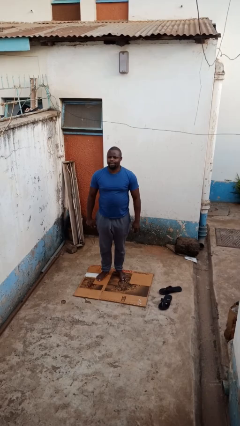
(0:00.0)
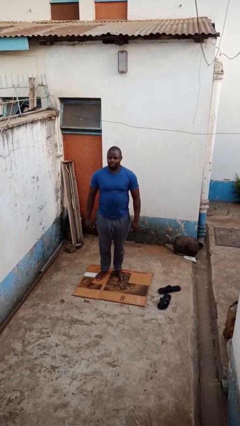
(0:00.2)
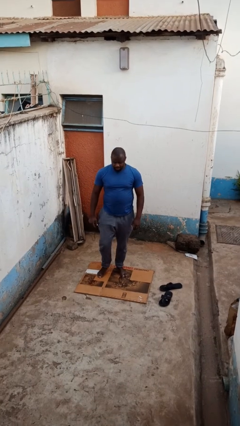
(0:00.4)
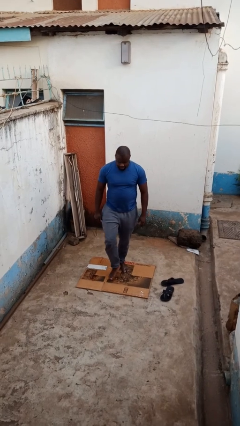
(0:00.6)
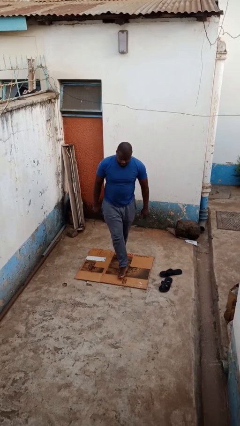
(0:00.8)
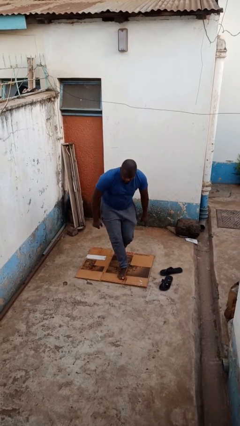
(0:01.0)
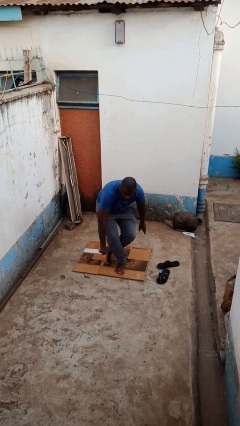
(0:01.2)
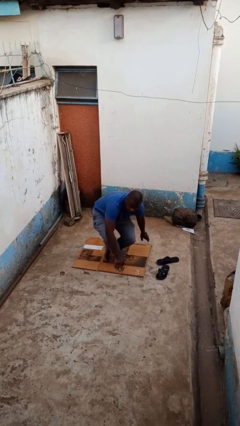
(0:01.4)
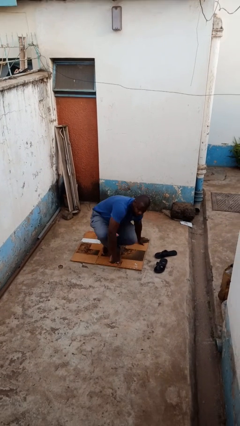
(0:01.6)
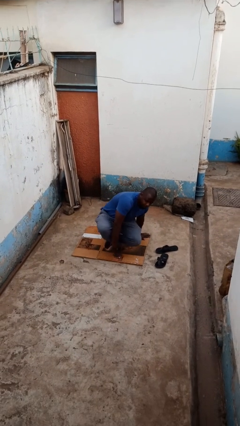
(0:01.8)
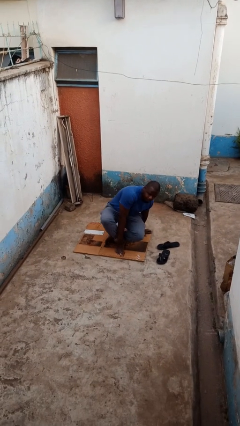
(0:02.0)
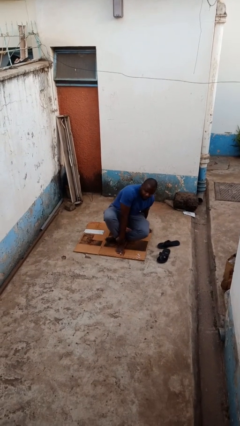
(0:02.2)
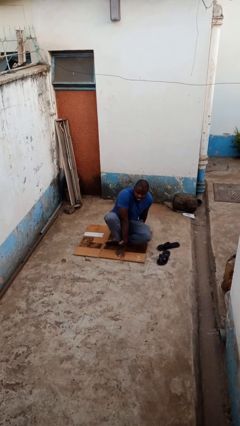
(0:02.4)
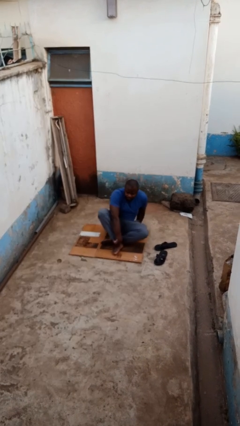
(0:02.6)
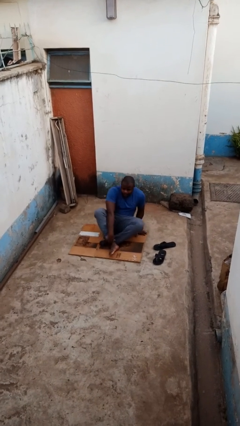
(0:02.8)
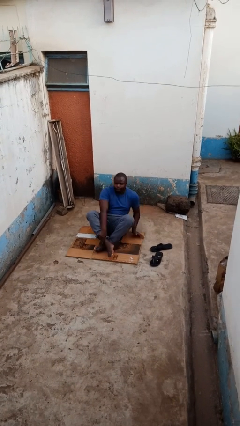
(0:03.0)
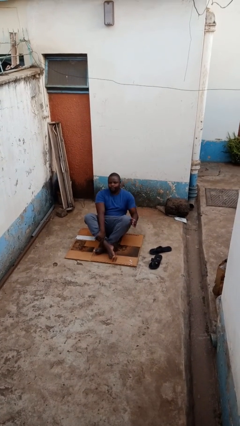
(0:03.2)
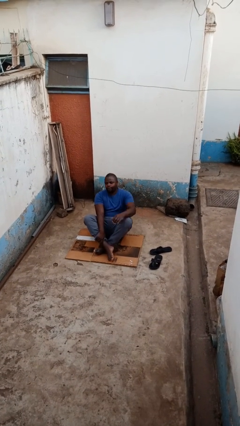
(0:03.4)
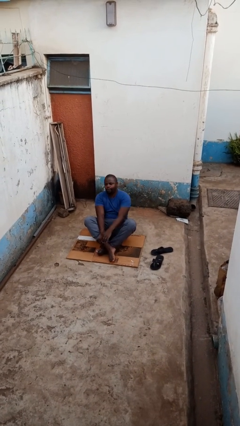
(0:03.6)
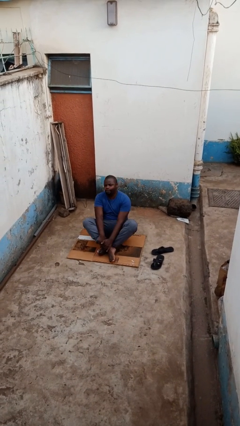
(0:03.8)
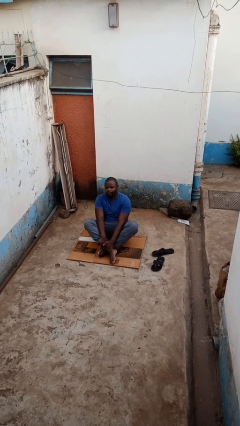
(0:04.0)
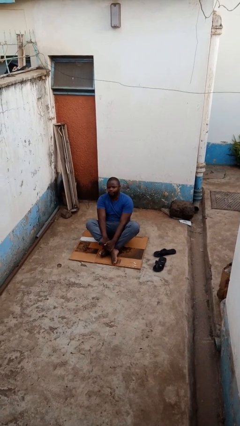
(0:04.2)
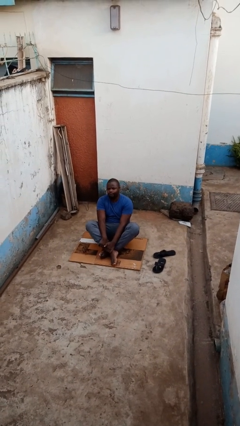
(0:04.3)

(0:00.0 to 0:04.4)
person sits crisscross

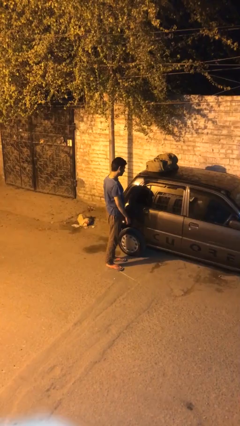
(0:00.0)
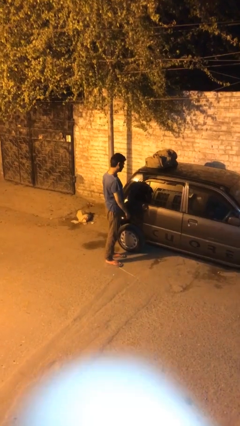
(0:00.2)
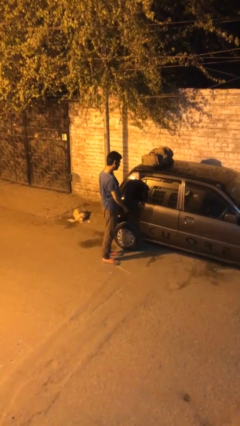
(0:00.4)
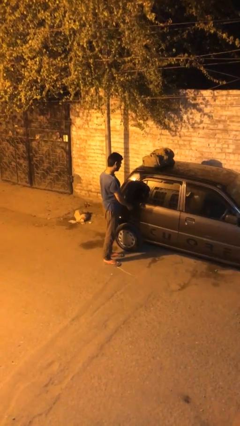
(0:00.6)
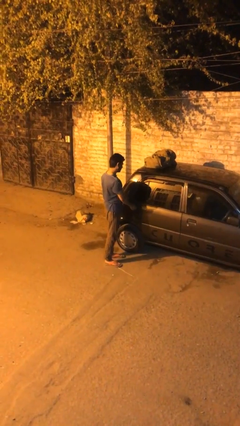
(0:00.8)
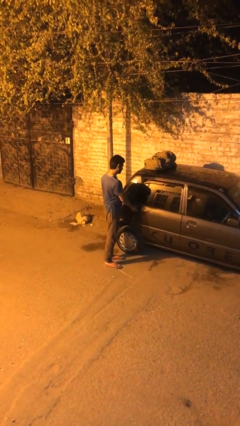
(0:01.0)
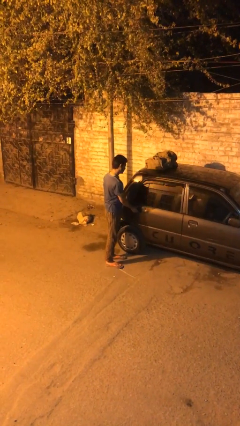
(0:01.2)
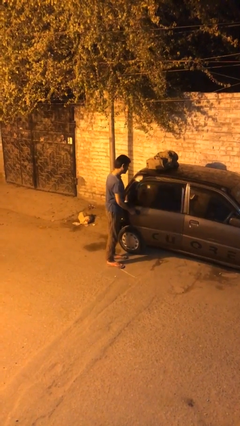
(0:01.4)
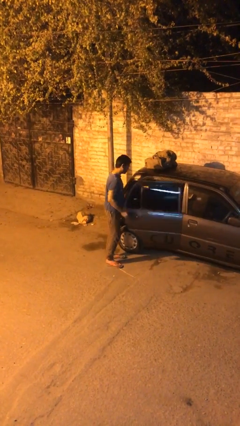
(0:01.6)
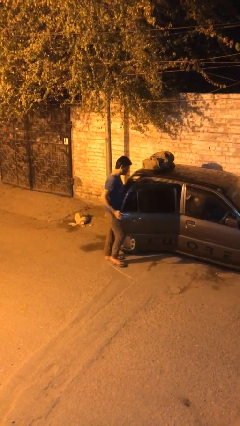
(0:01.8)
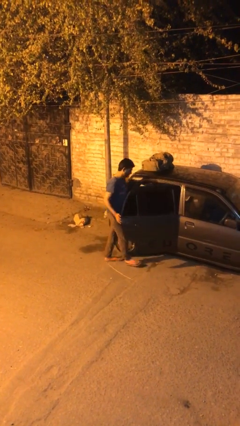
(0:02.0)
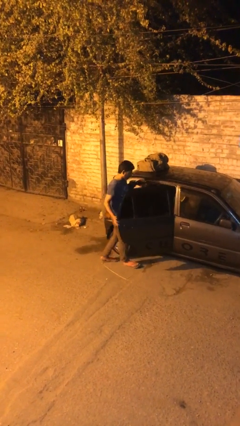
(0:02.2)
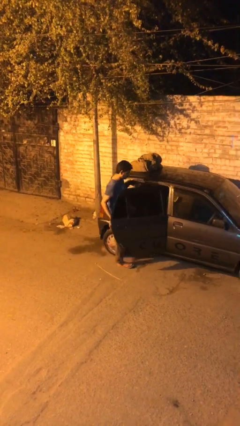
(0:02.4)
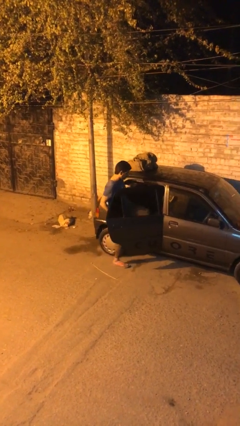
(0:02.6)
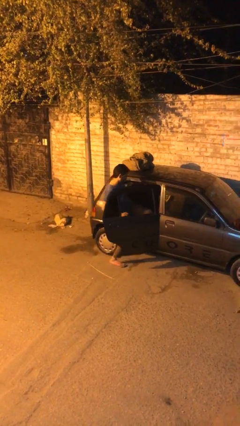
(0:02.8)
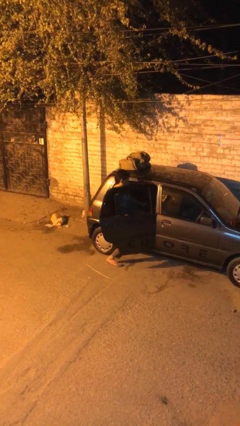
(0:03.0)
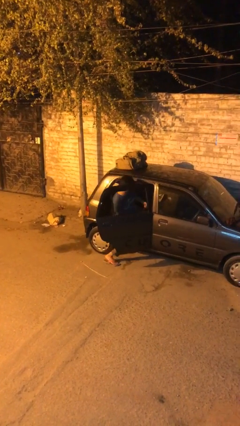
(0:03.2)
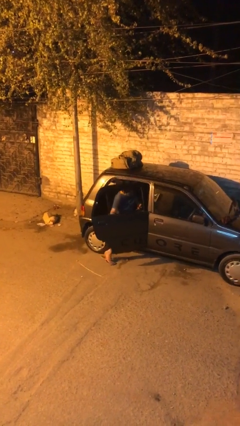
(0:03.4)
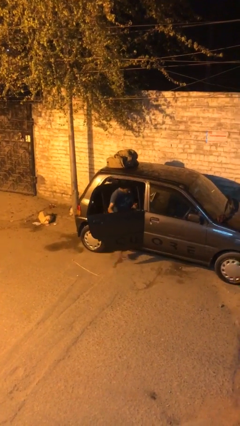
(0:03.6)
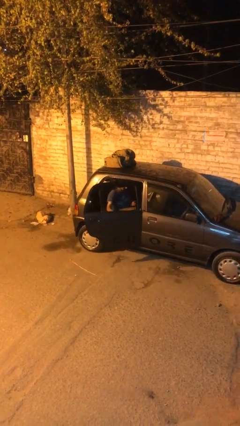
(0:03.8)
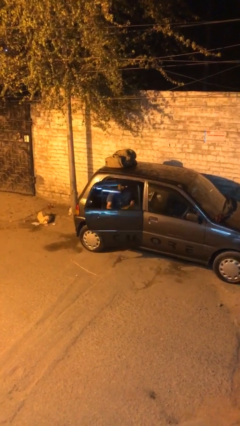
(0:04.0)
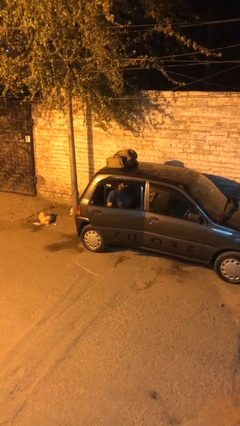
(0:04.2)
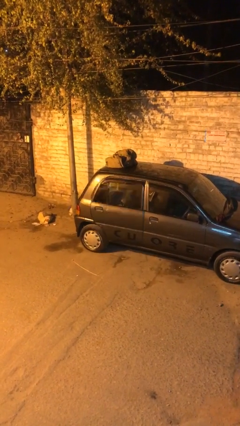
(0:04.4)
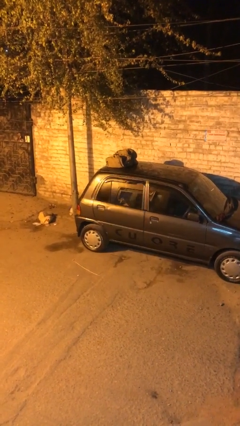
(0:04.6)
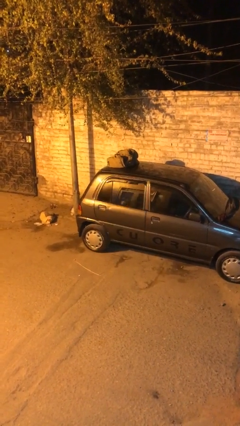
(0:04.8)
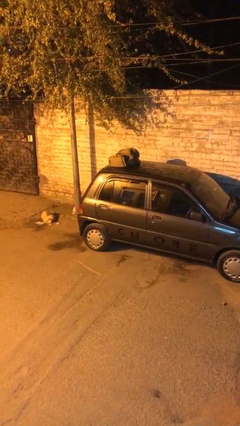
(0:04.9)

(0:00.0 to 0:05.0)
car picks up person

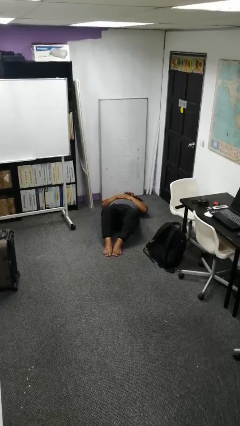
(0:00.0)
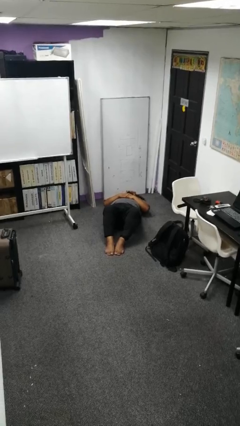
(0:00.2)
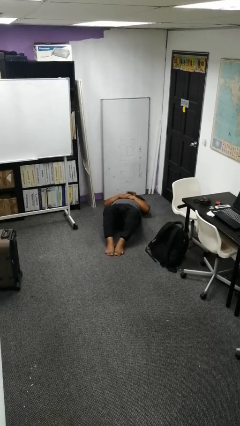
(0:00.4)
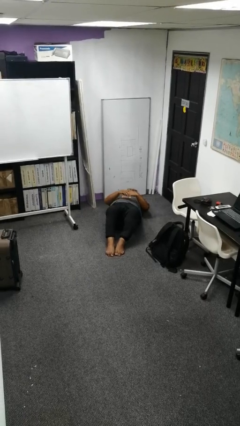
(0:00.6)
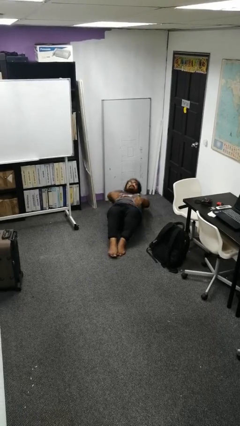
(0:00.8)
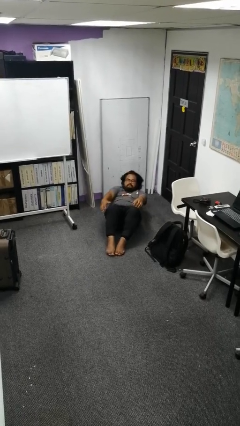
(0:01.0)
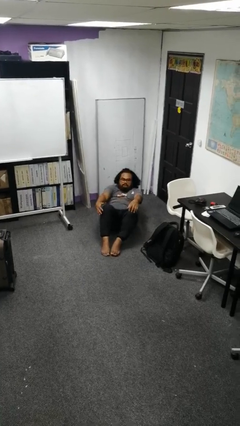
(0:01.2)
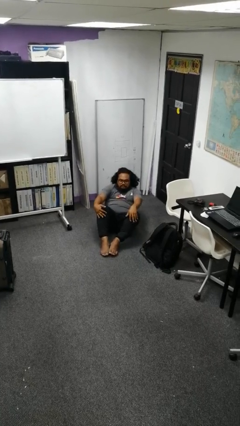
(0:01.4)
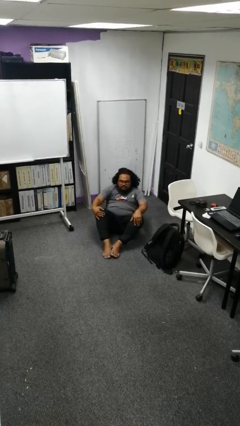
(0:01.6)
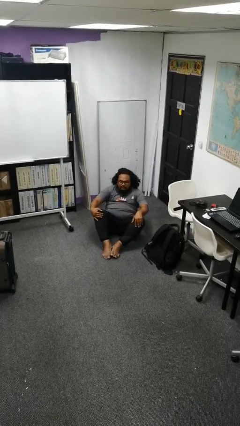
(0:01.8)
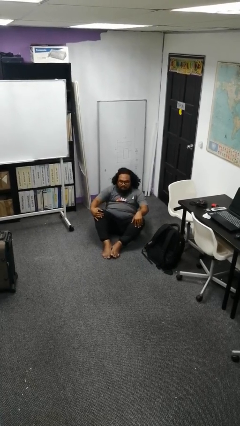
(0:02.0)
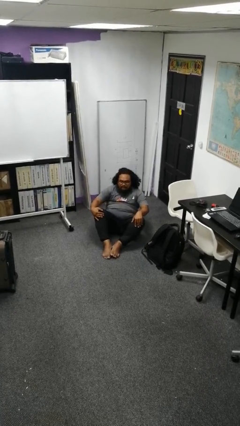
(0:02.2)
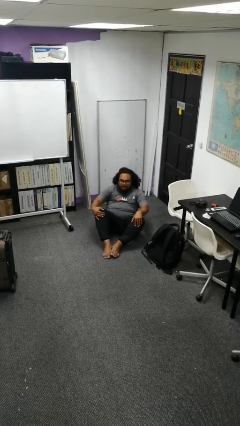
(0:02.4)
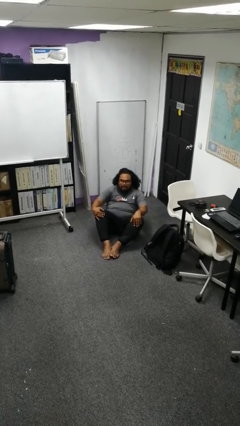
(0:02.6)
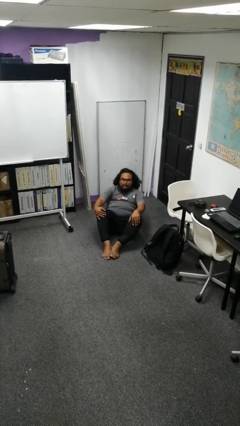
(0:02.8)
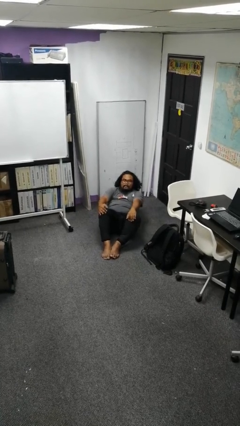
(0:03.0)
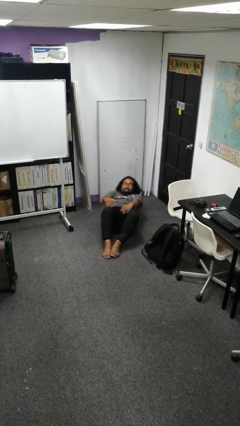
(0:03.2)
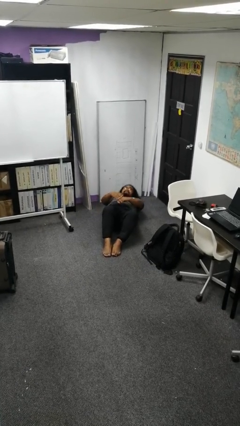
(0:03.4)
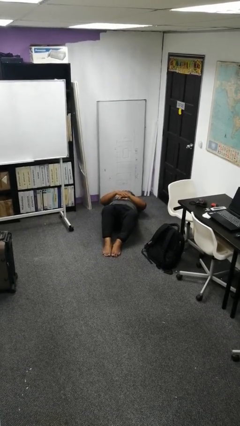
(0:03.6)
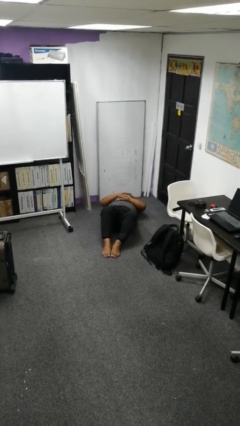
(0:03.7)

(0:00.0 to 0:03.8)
person exercises with situp

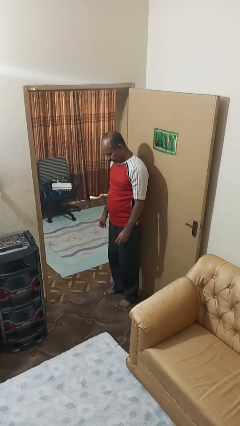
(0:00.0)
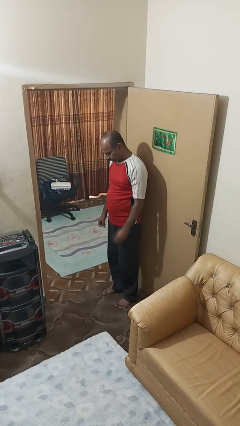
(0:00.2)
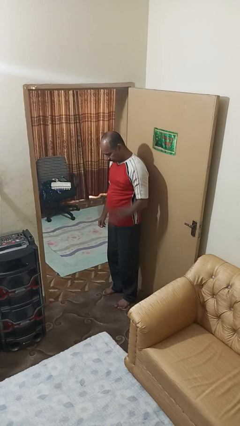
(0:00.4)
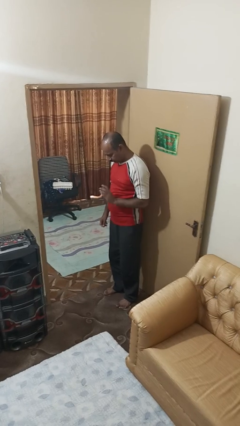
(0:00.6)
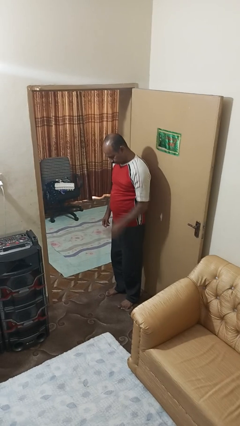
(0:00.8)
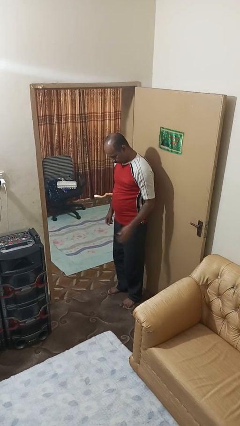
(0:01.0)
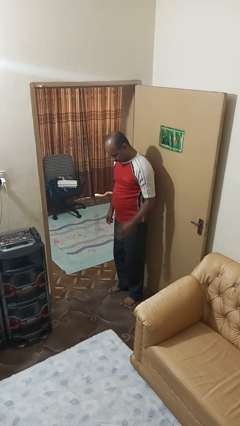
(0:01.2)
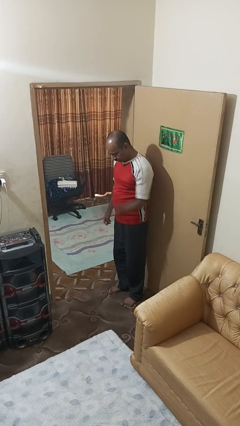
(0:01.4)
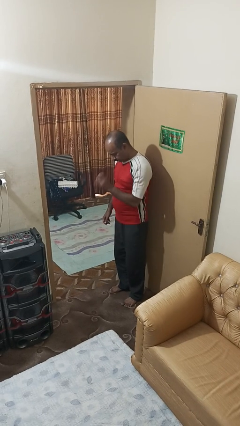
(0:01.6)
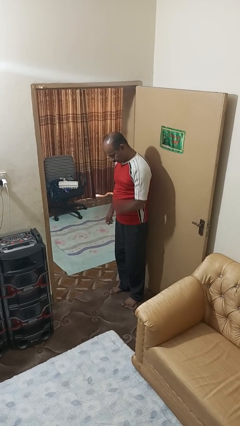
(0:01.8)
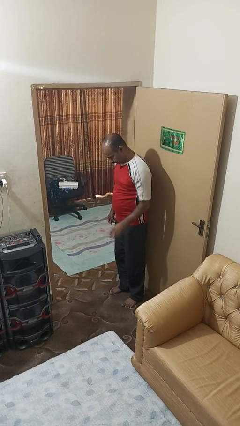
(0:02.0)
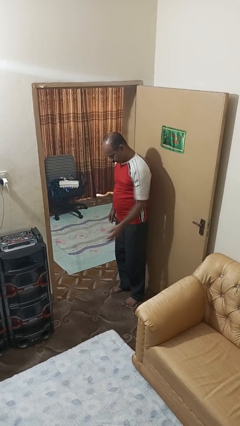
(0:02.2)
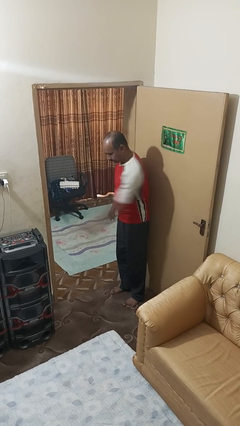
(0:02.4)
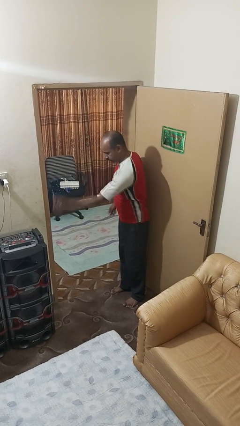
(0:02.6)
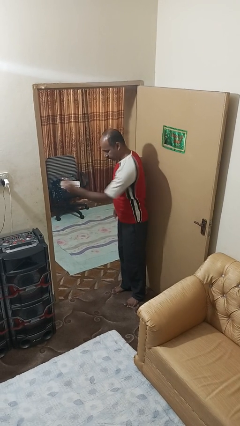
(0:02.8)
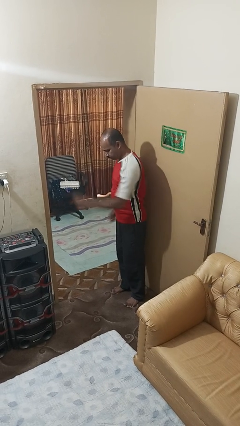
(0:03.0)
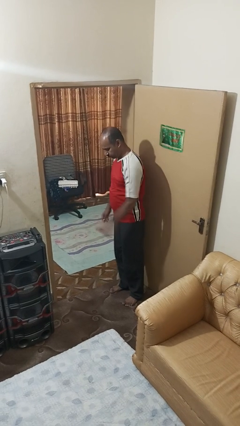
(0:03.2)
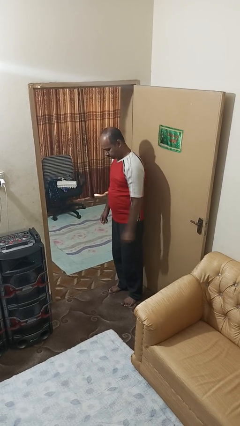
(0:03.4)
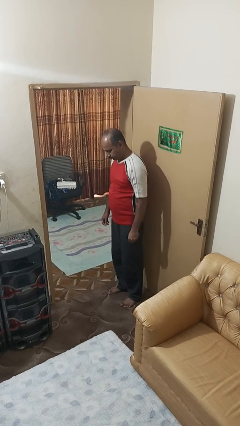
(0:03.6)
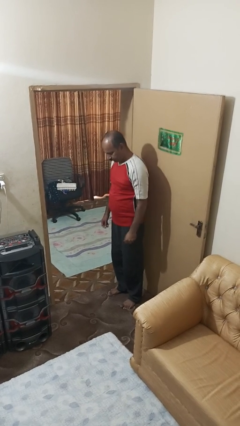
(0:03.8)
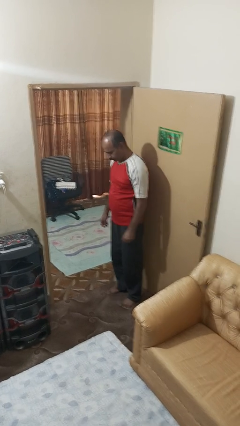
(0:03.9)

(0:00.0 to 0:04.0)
person bounces ball on floor

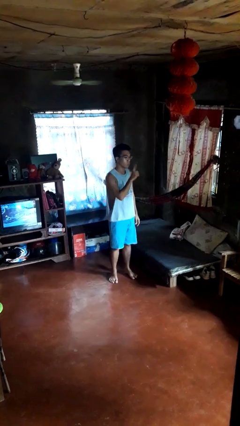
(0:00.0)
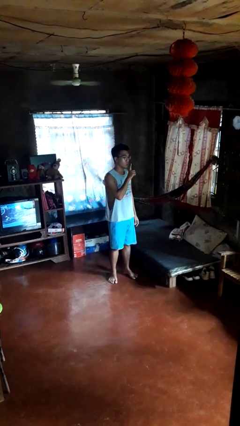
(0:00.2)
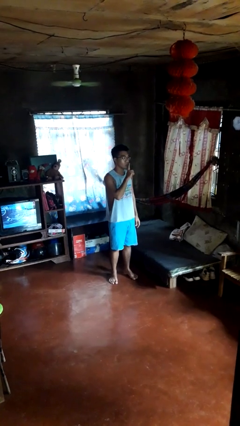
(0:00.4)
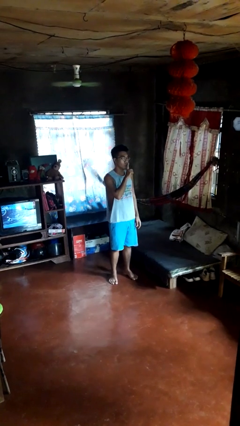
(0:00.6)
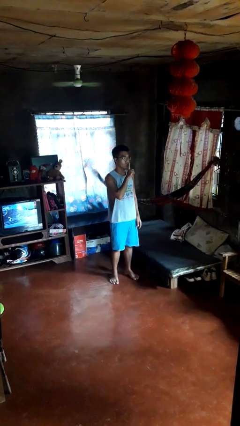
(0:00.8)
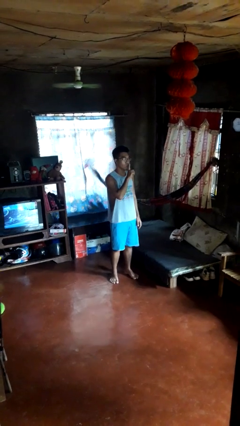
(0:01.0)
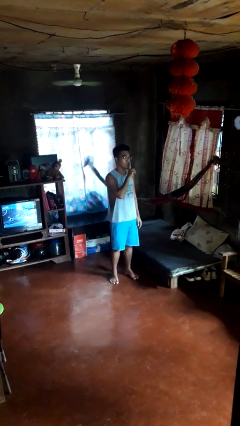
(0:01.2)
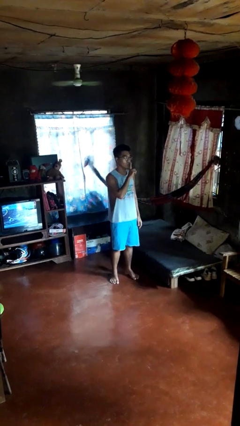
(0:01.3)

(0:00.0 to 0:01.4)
person gestures be quiet
